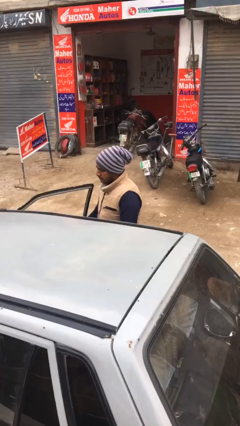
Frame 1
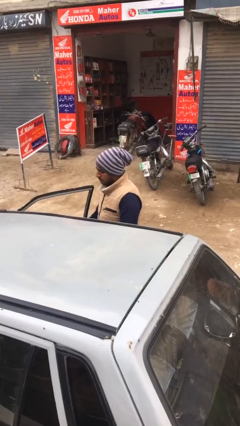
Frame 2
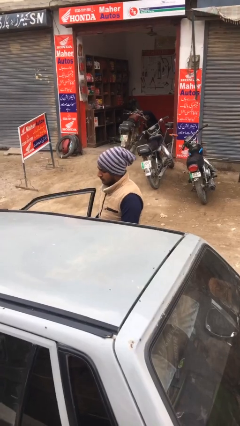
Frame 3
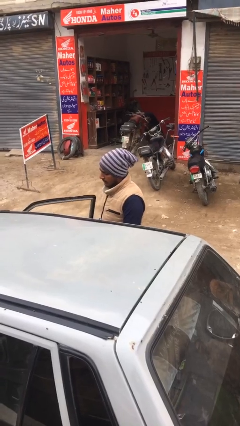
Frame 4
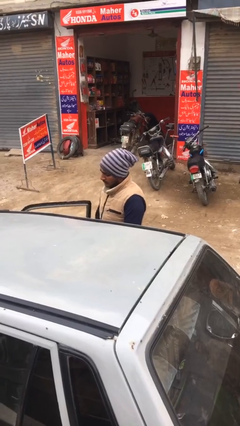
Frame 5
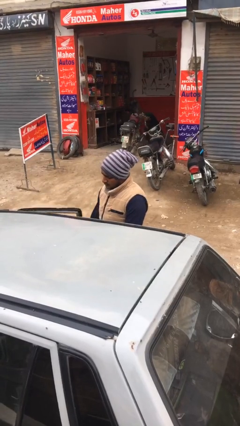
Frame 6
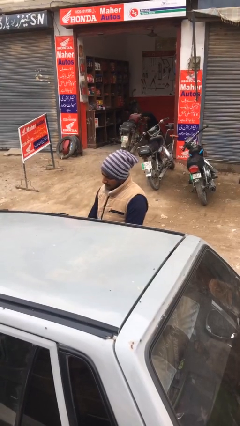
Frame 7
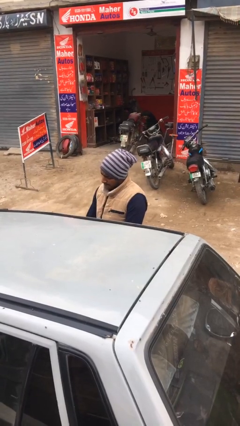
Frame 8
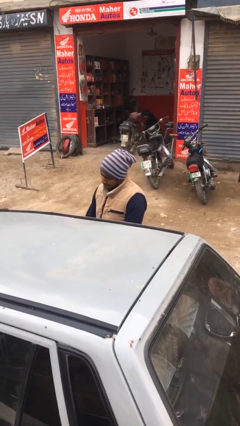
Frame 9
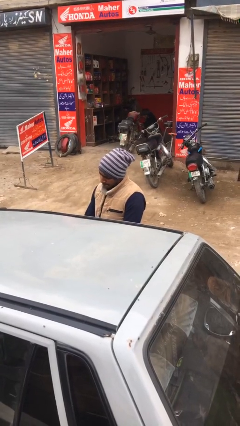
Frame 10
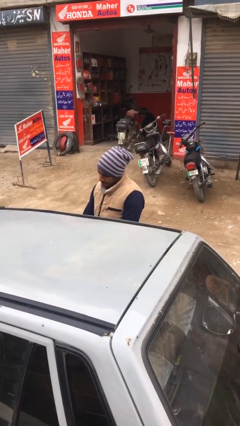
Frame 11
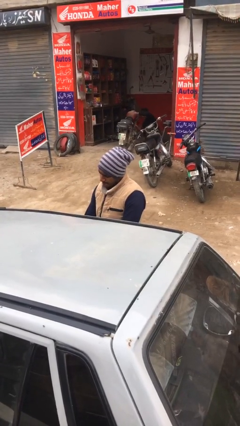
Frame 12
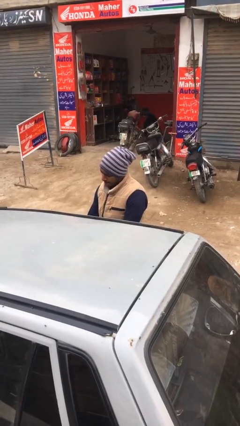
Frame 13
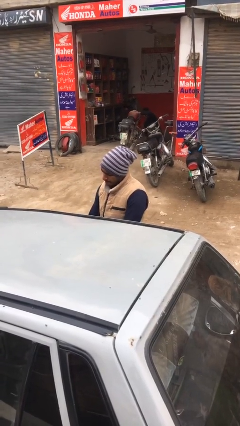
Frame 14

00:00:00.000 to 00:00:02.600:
person closes car door

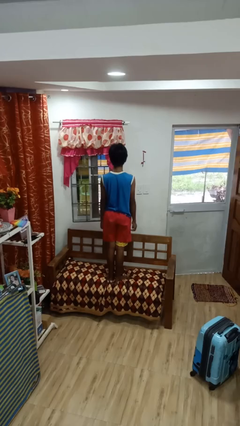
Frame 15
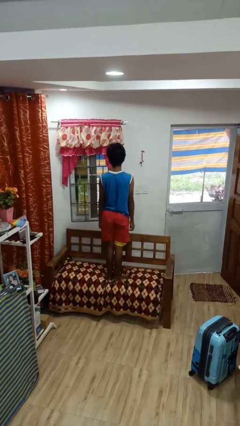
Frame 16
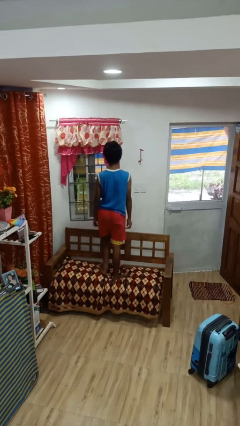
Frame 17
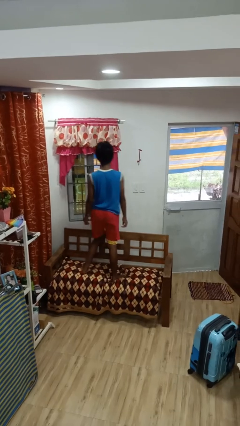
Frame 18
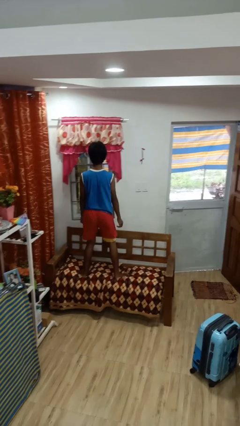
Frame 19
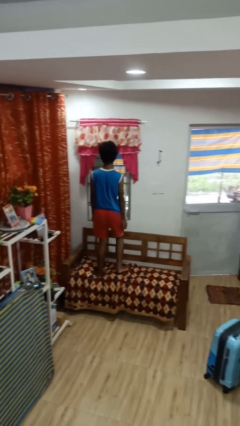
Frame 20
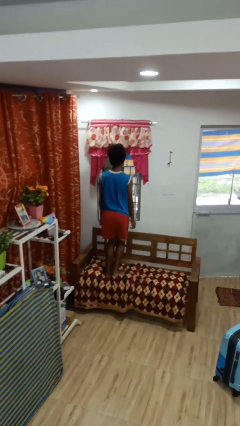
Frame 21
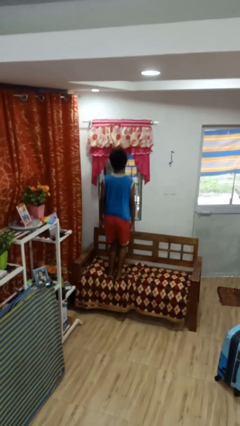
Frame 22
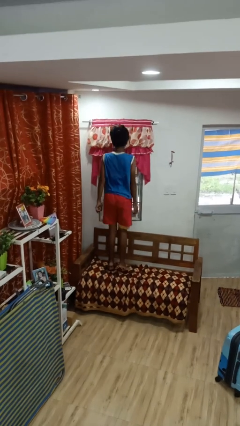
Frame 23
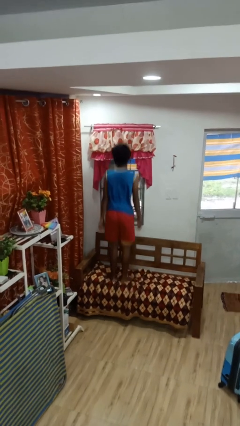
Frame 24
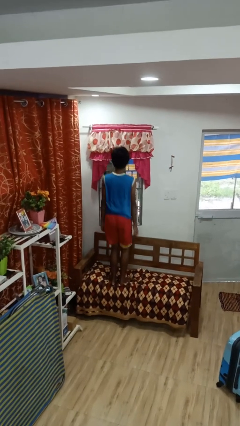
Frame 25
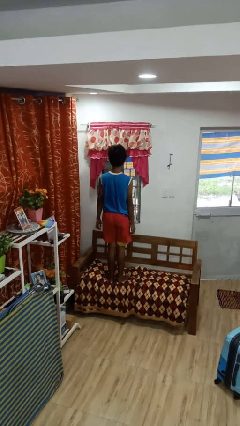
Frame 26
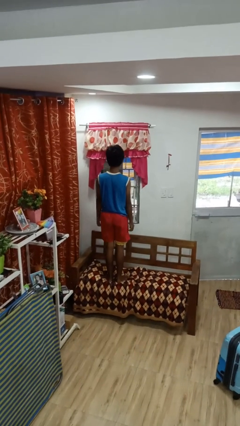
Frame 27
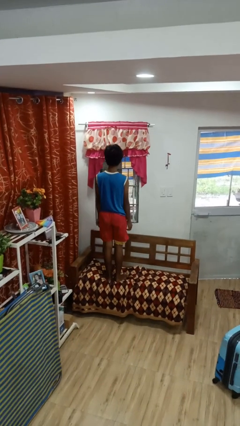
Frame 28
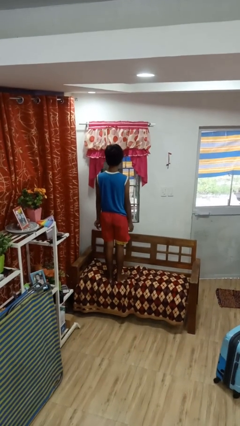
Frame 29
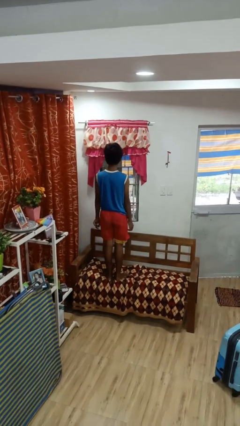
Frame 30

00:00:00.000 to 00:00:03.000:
person jumps on couch

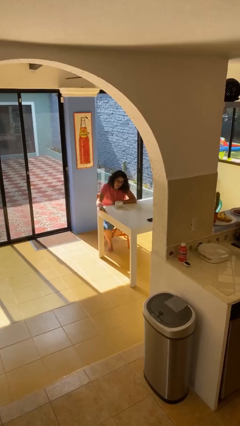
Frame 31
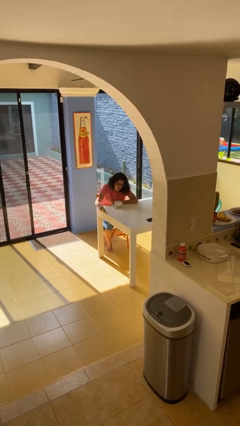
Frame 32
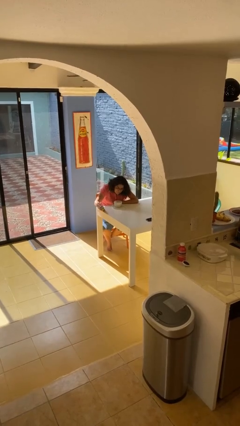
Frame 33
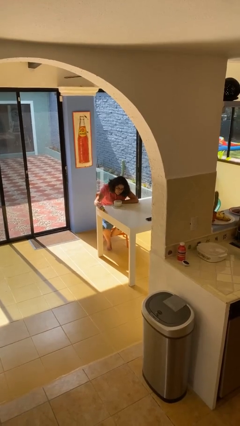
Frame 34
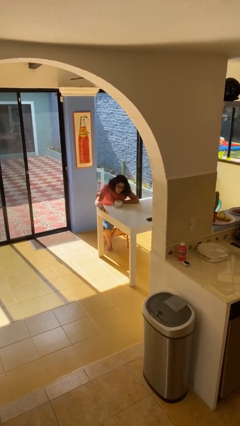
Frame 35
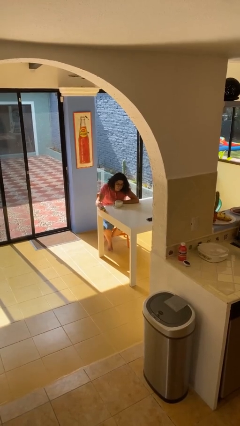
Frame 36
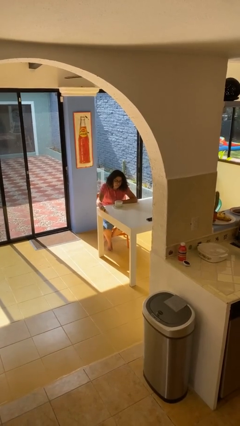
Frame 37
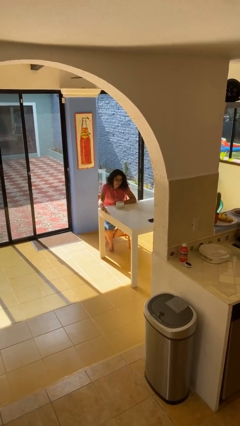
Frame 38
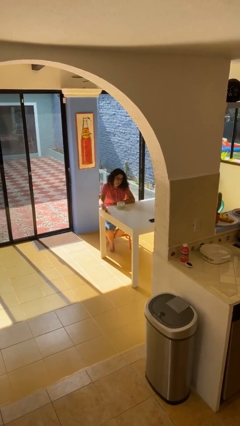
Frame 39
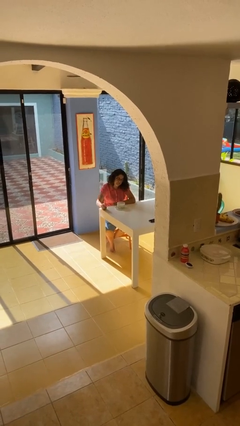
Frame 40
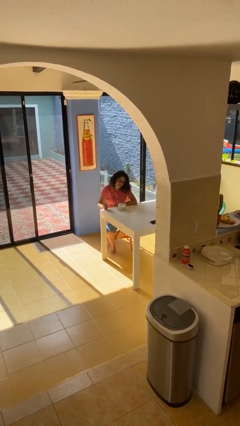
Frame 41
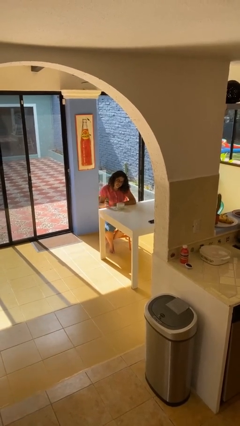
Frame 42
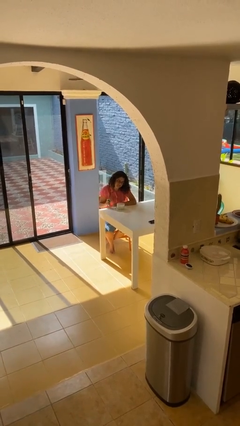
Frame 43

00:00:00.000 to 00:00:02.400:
person extinguishes candle

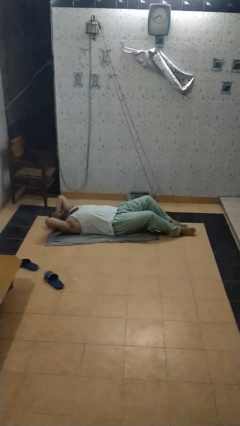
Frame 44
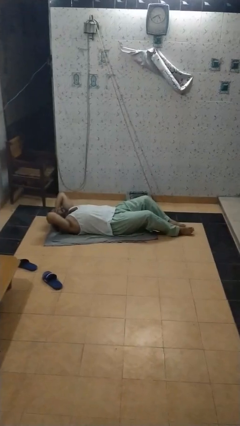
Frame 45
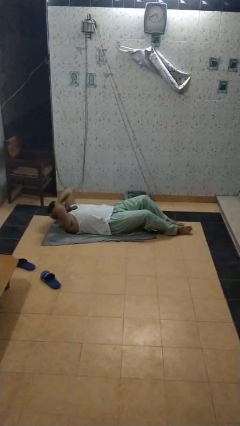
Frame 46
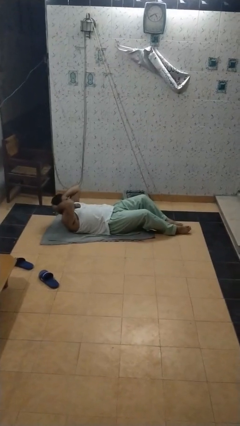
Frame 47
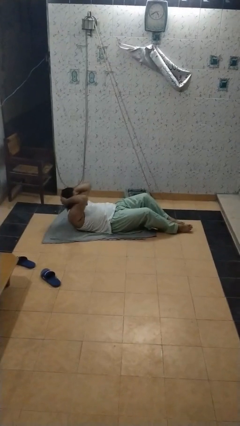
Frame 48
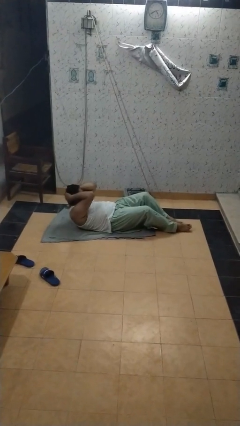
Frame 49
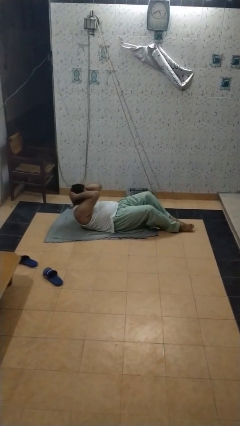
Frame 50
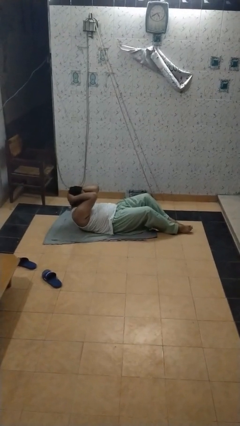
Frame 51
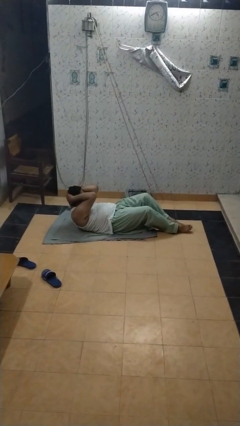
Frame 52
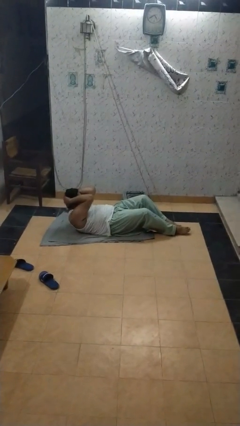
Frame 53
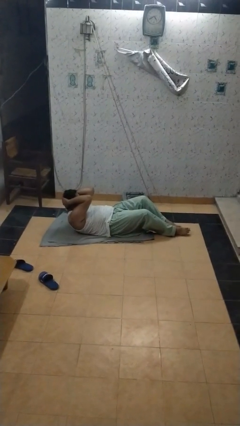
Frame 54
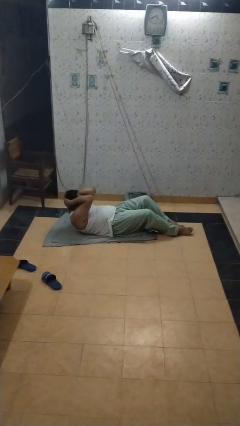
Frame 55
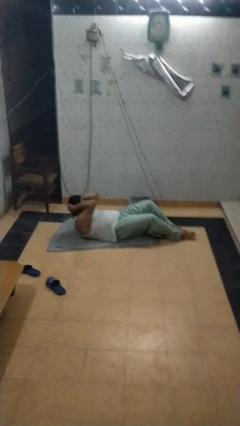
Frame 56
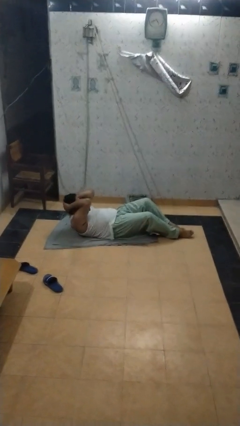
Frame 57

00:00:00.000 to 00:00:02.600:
person exercises with situp

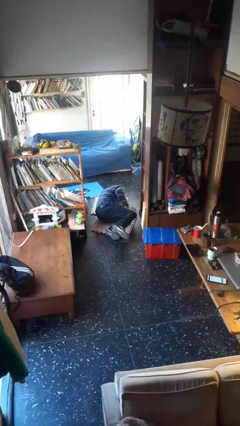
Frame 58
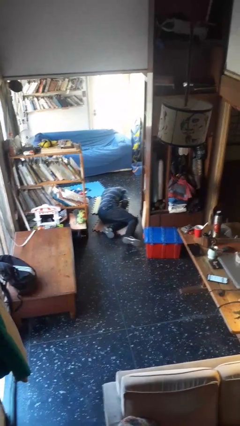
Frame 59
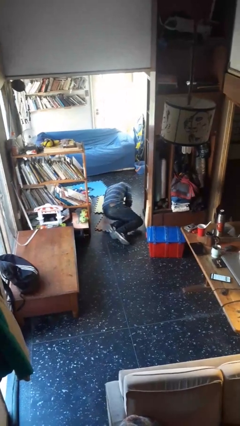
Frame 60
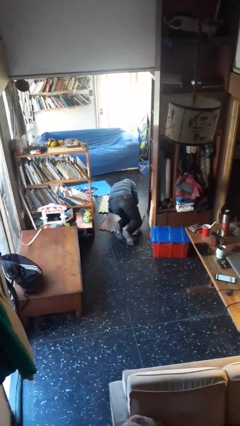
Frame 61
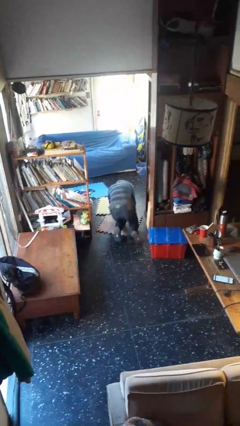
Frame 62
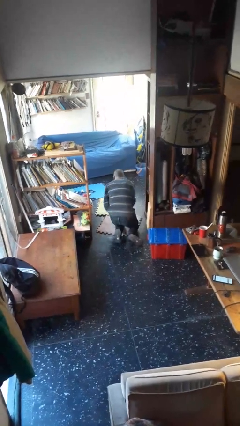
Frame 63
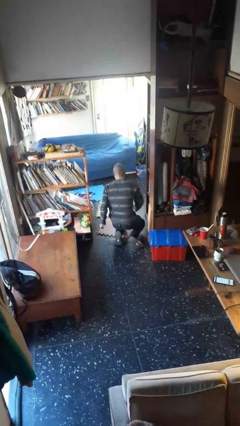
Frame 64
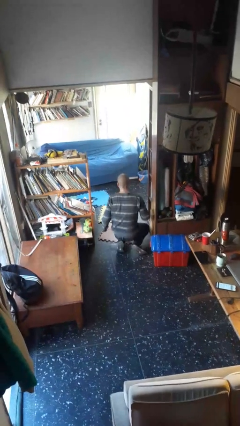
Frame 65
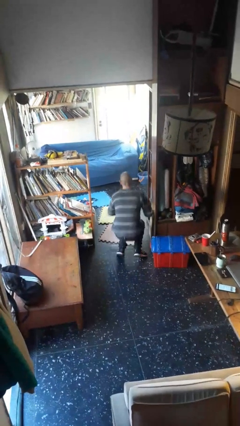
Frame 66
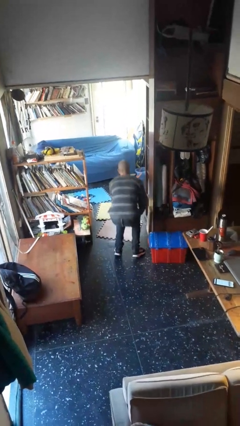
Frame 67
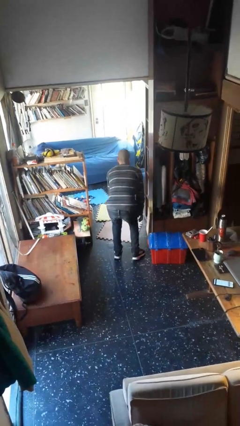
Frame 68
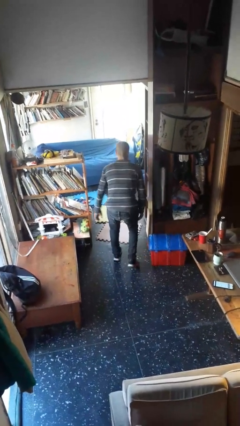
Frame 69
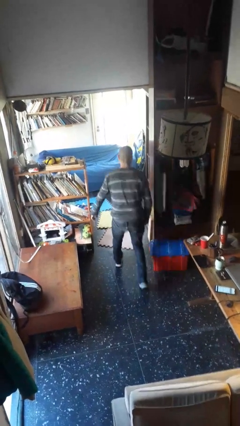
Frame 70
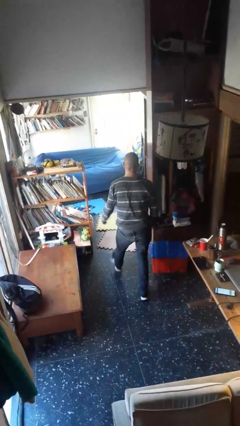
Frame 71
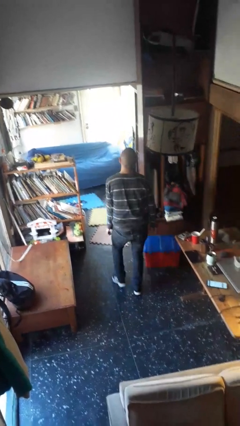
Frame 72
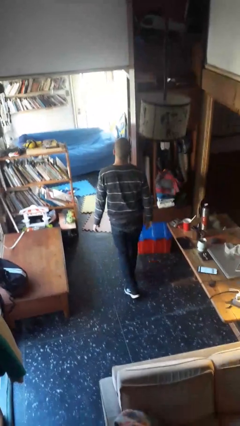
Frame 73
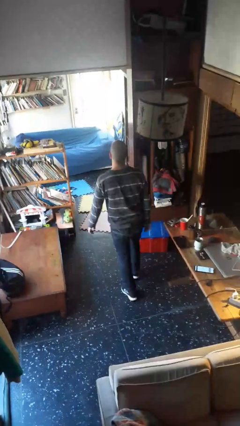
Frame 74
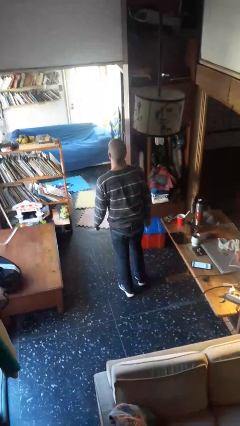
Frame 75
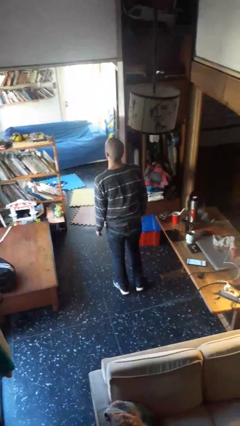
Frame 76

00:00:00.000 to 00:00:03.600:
person stands up from floor

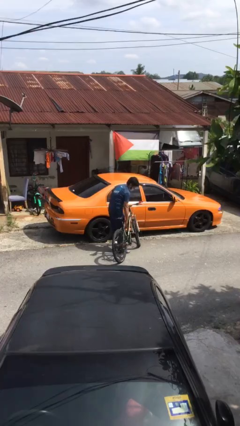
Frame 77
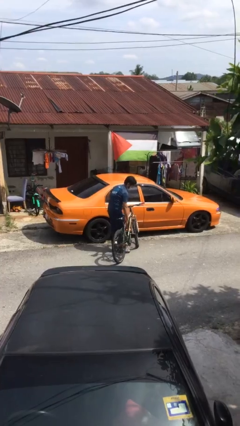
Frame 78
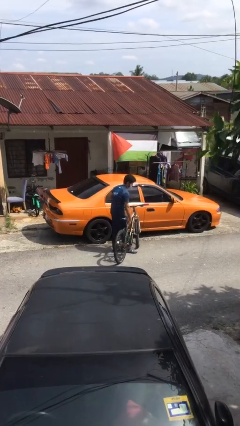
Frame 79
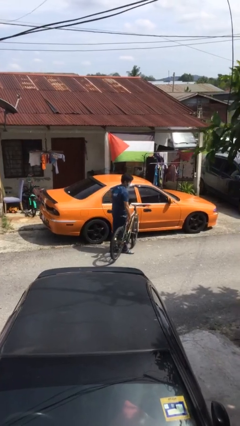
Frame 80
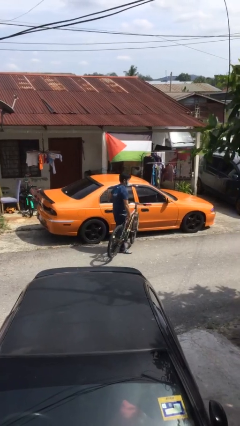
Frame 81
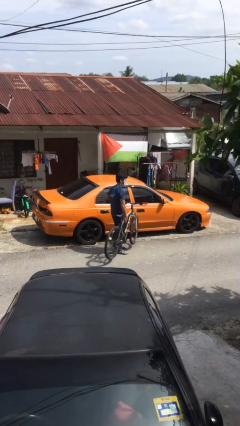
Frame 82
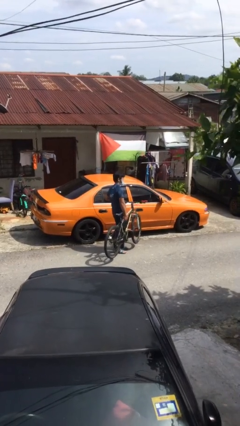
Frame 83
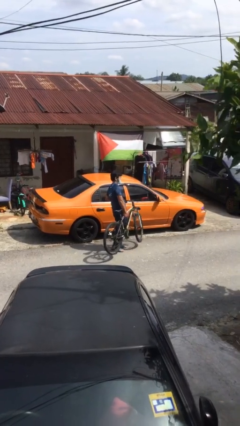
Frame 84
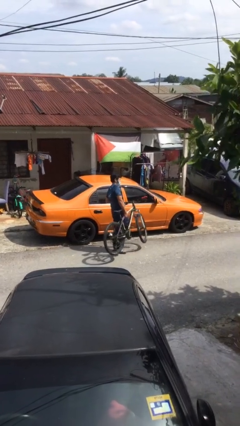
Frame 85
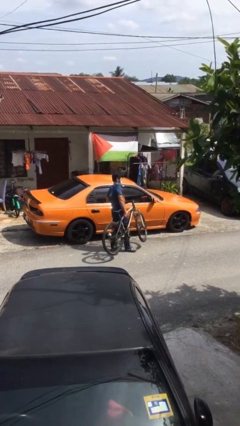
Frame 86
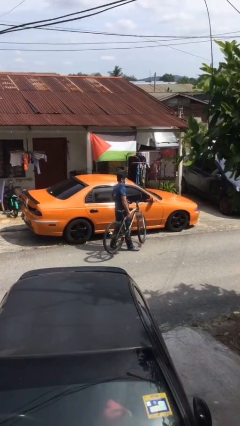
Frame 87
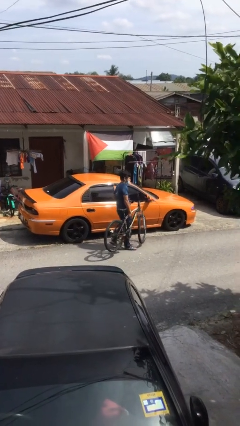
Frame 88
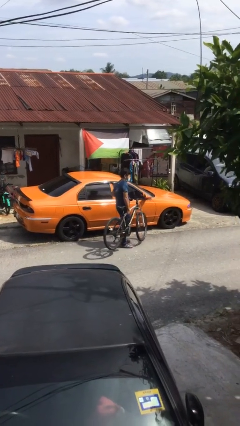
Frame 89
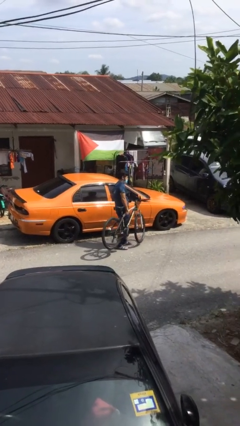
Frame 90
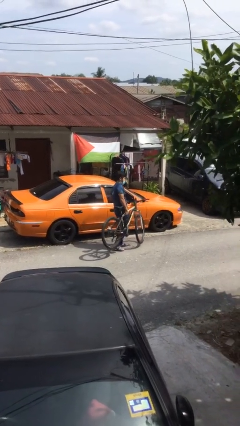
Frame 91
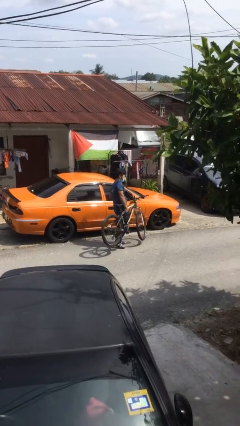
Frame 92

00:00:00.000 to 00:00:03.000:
person carries bicycle
